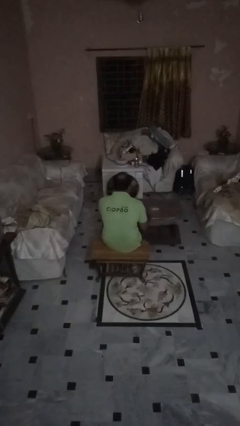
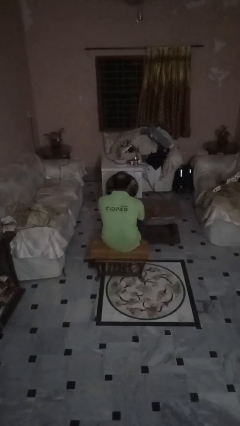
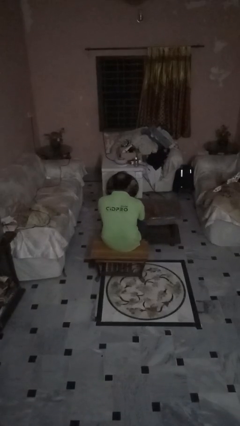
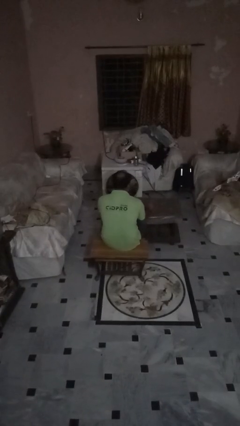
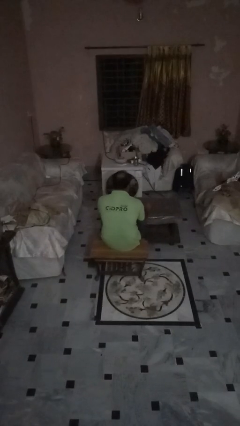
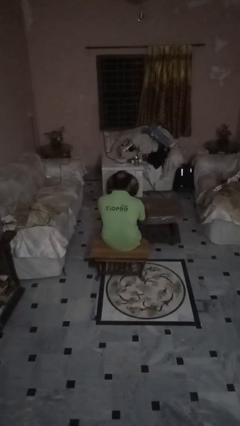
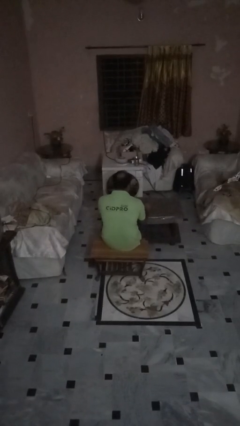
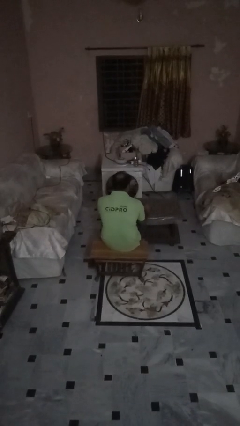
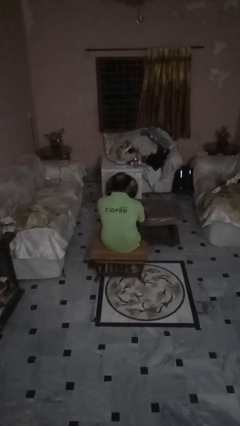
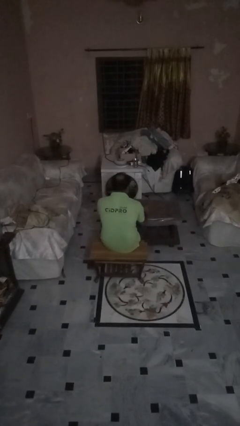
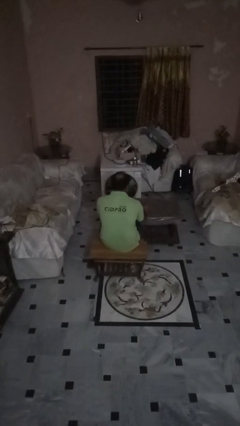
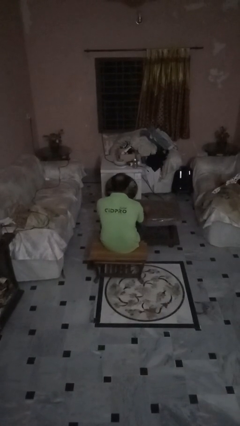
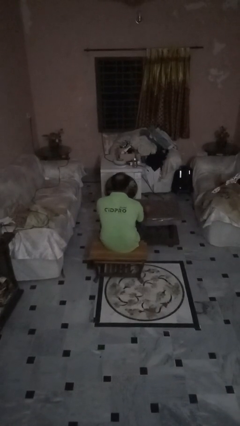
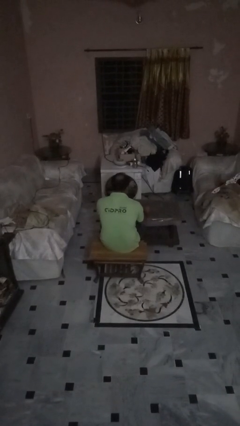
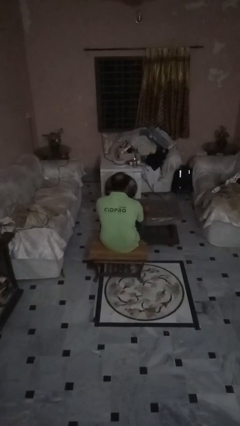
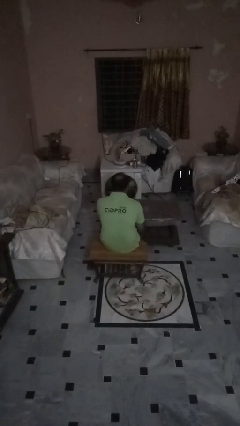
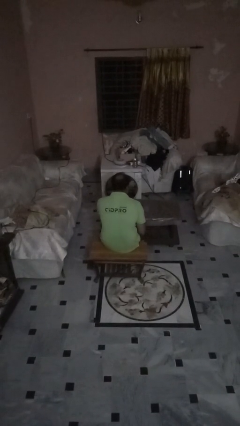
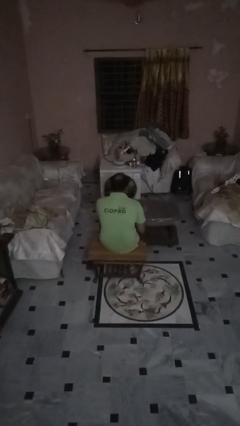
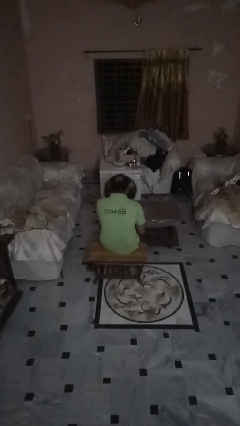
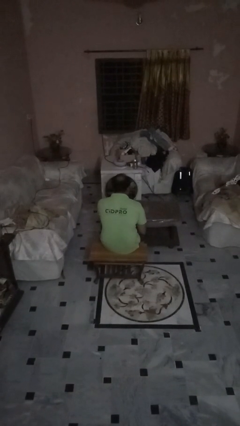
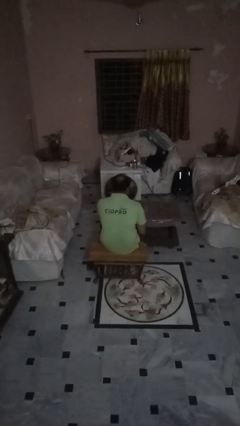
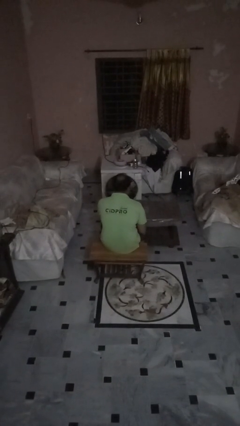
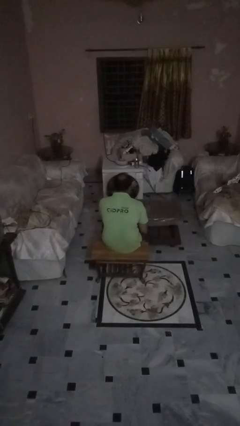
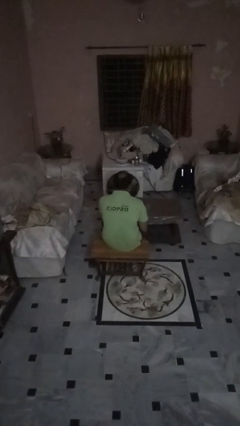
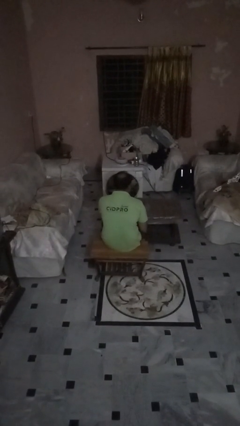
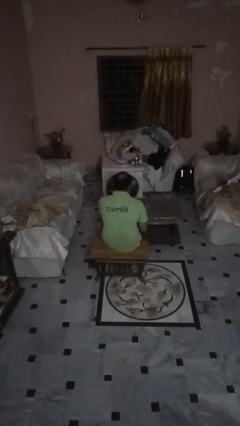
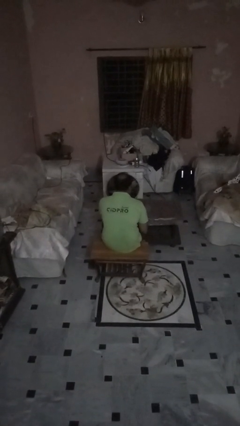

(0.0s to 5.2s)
person sets upright glass

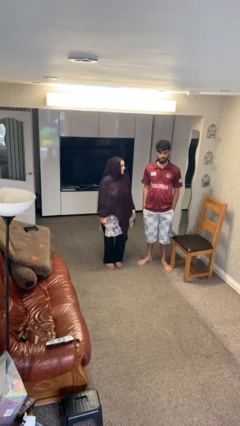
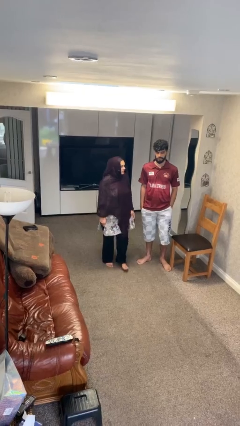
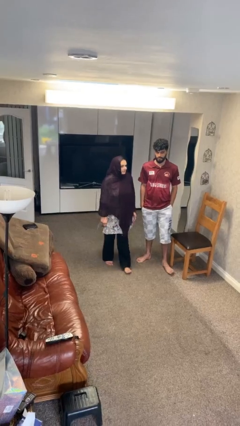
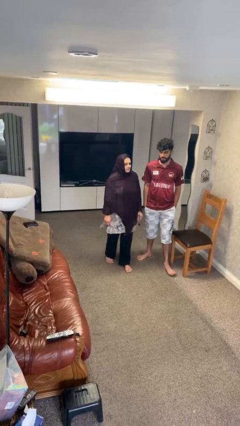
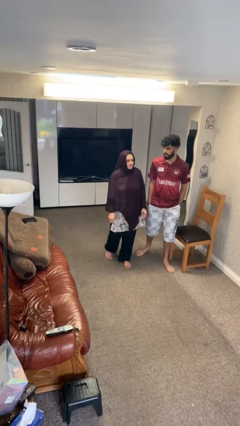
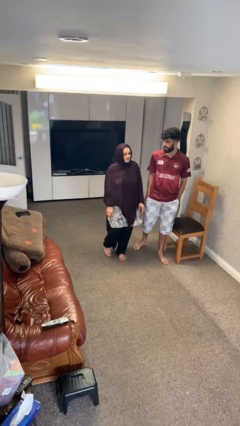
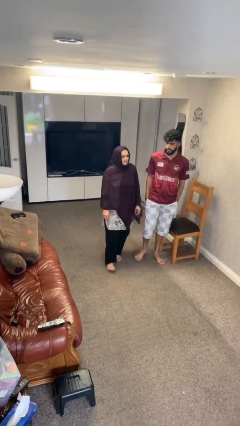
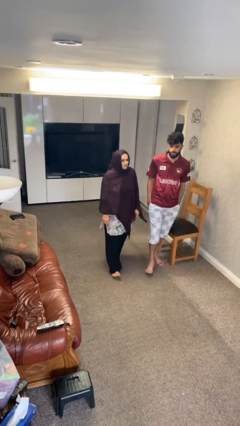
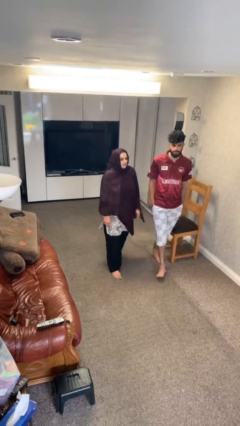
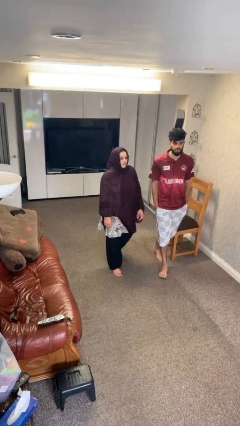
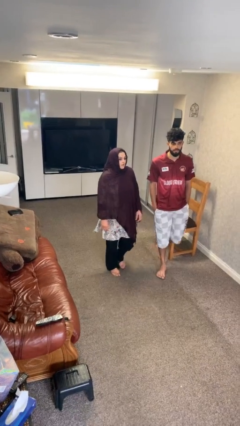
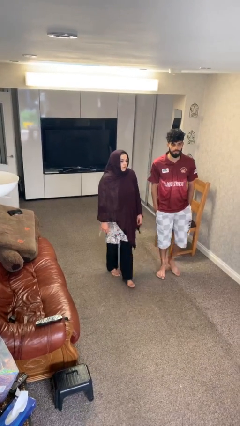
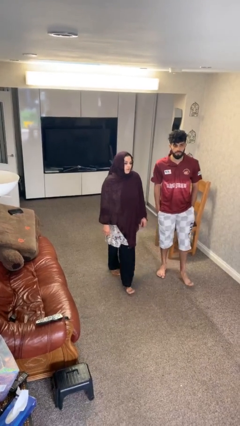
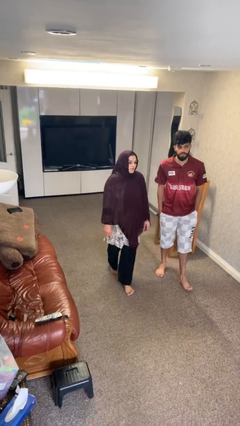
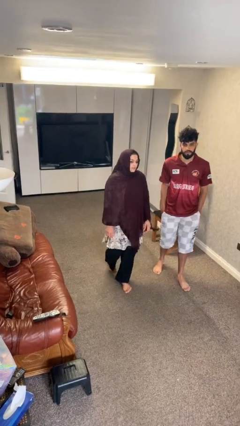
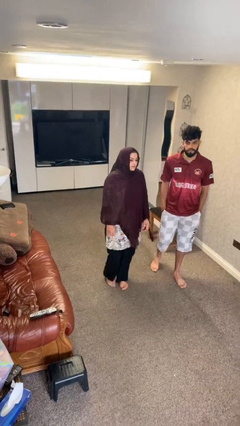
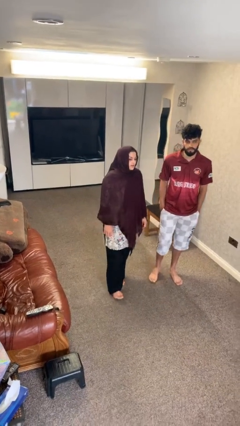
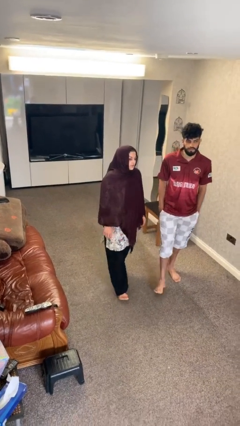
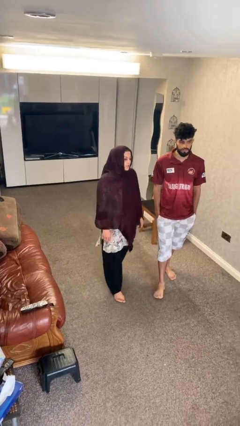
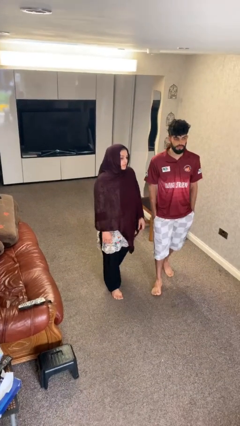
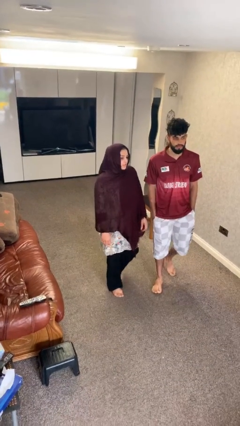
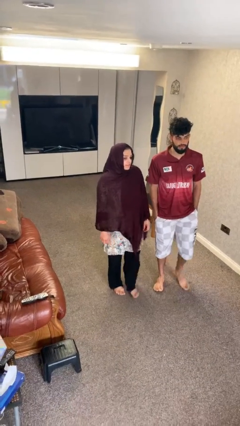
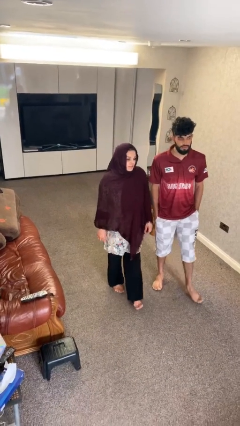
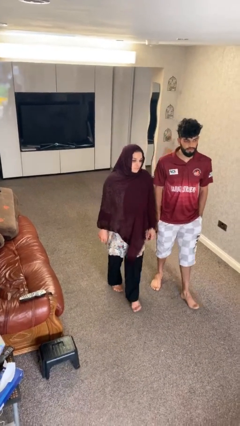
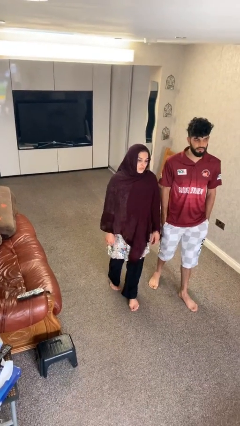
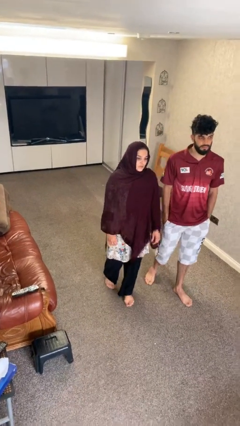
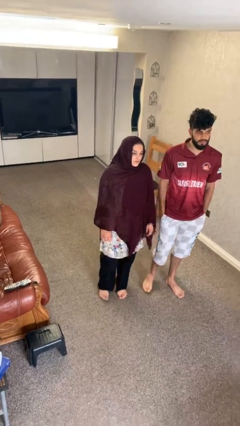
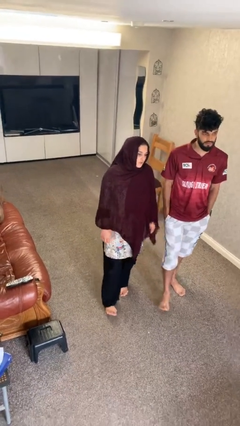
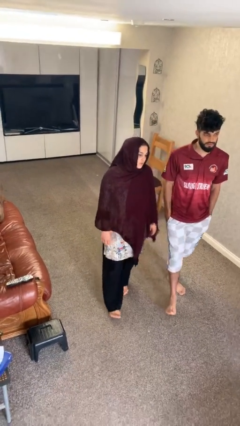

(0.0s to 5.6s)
person talks to person

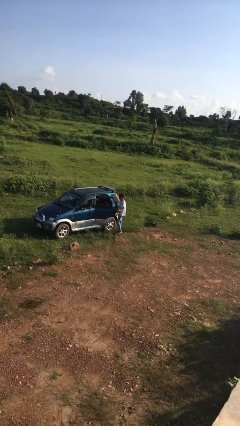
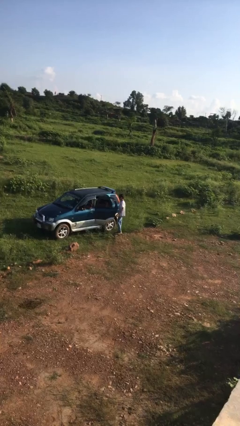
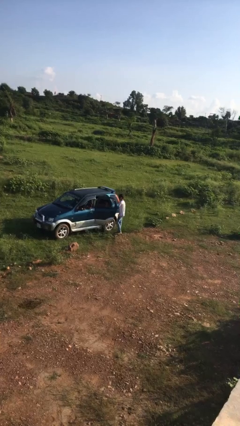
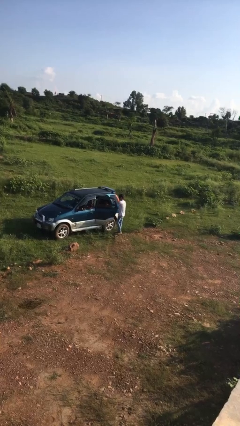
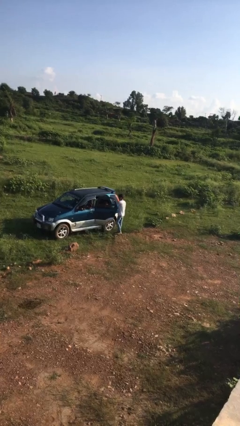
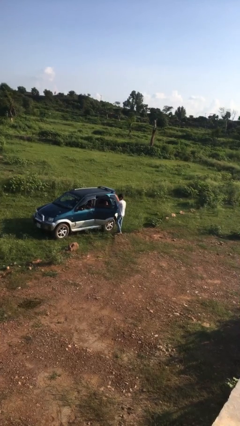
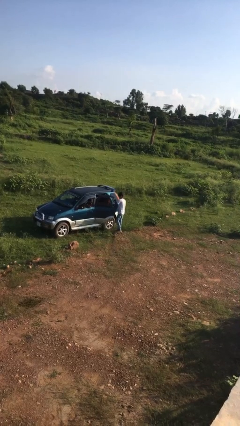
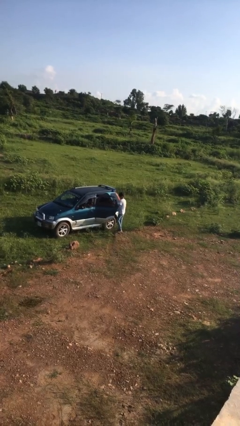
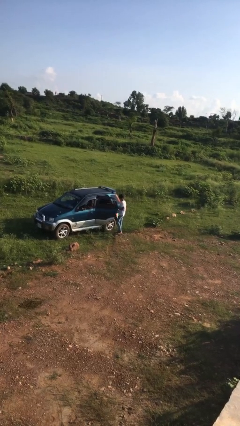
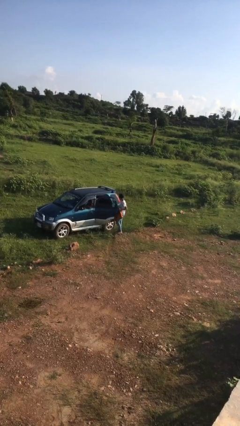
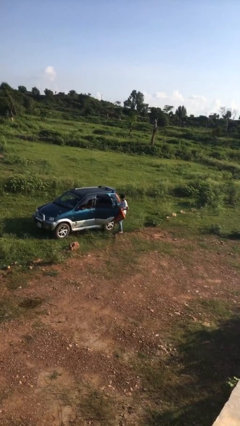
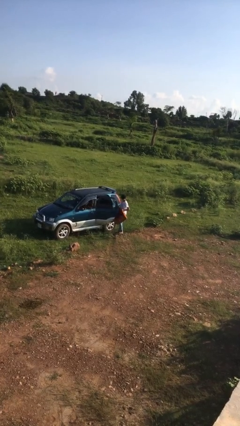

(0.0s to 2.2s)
person unloads car

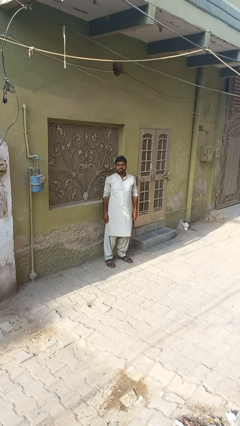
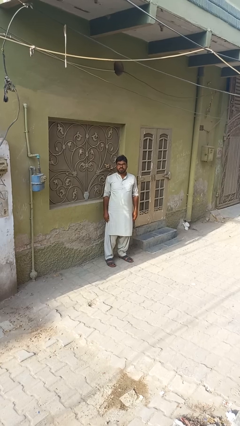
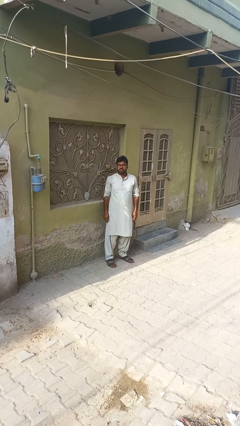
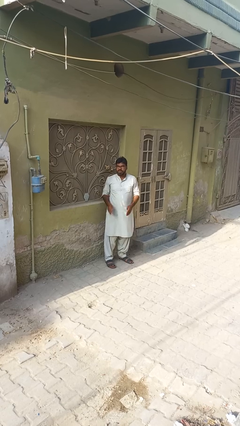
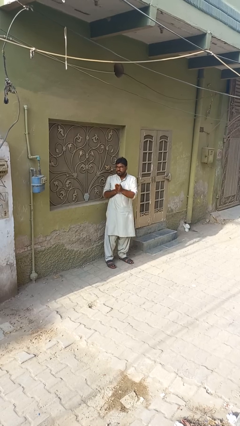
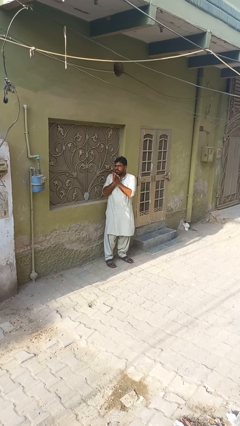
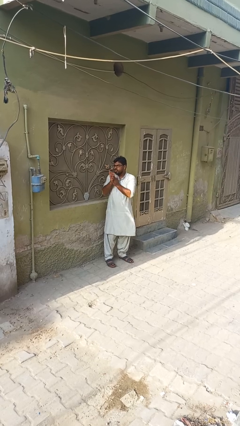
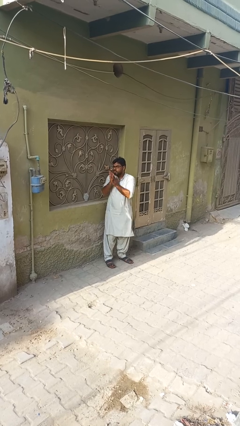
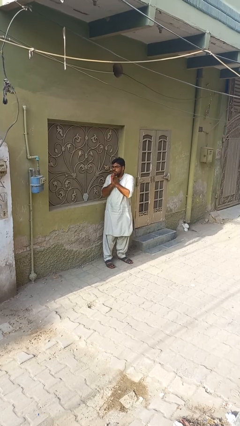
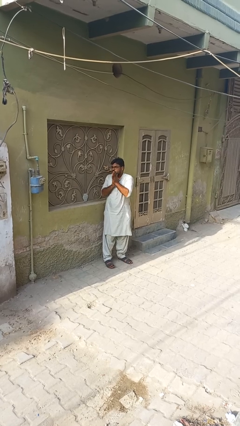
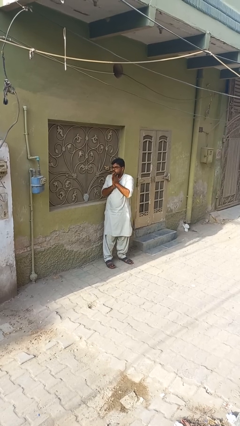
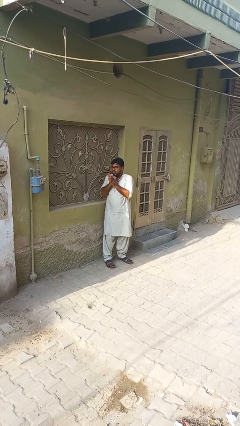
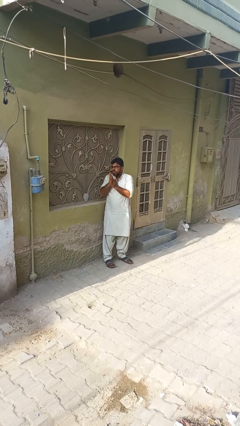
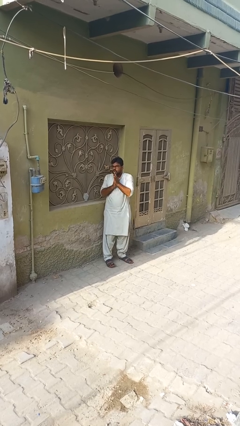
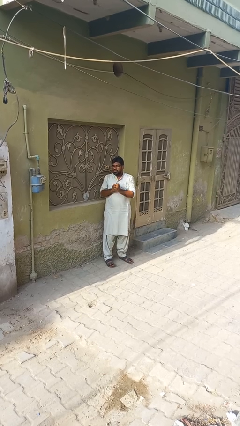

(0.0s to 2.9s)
person blows into hands

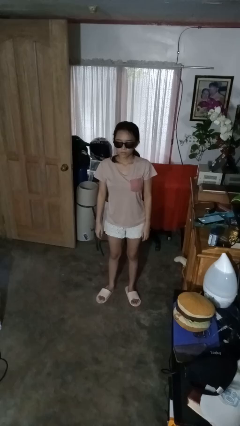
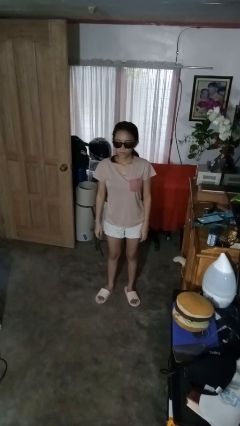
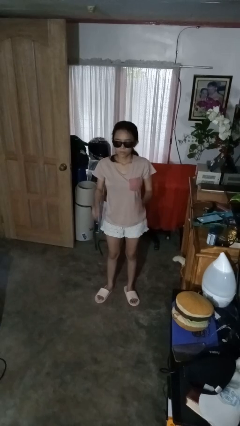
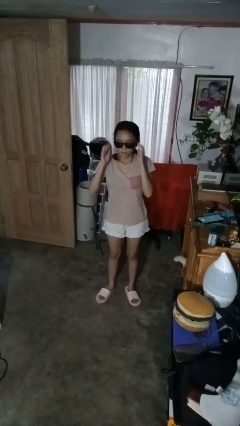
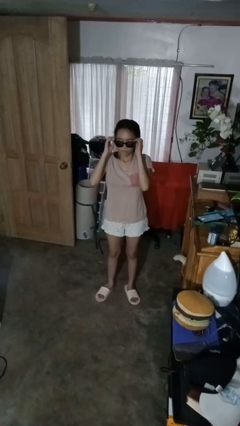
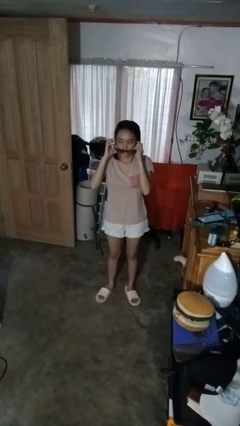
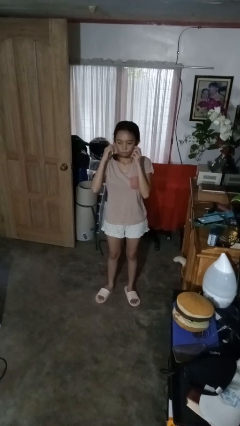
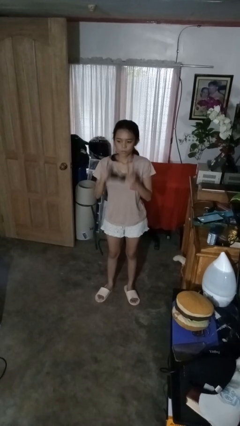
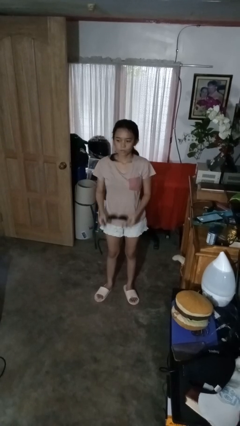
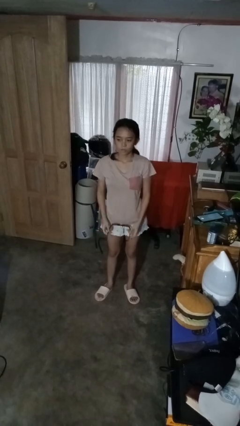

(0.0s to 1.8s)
person takes off sunglasses

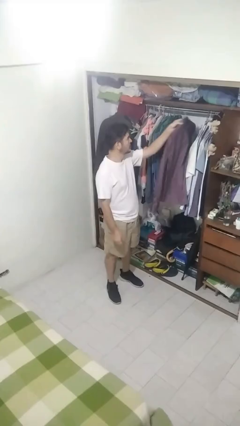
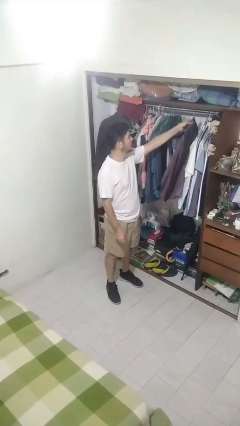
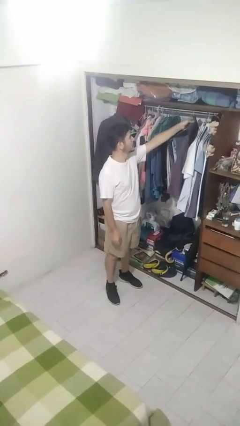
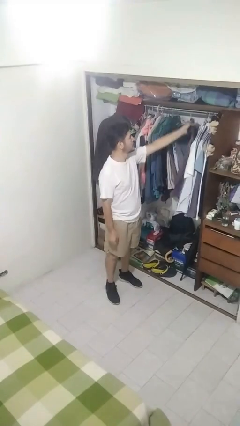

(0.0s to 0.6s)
person puts clothes into closet
